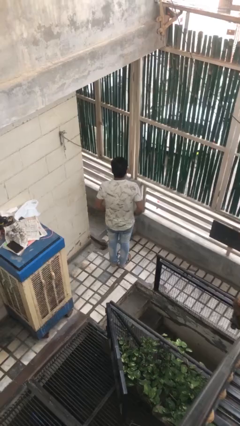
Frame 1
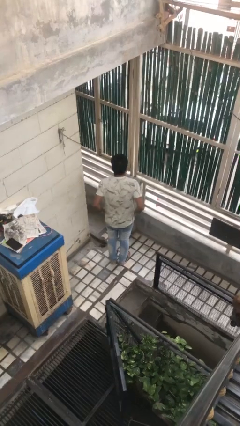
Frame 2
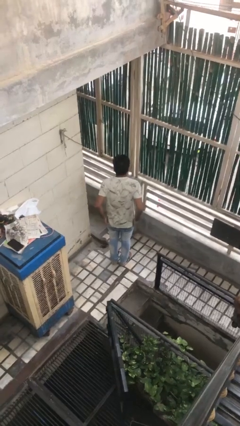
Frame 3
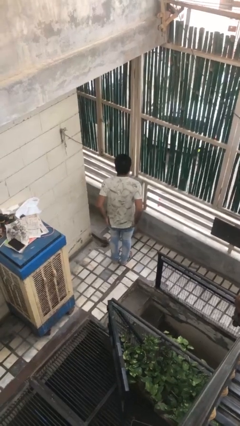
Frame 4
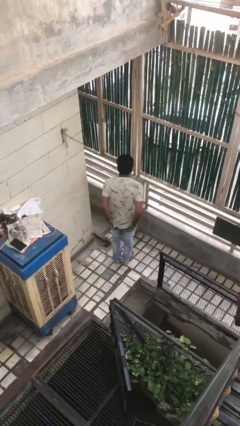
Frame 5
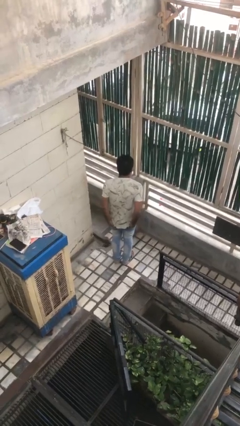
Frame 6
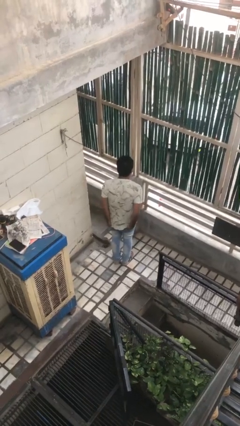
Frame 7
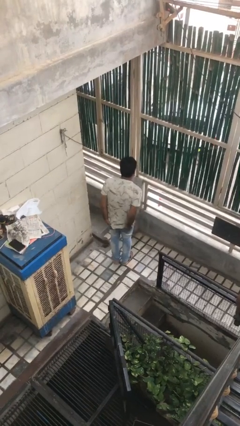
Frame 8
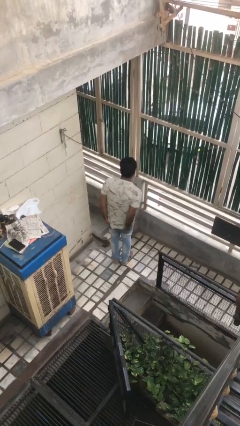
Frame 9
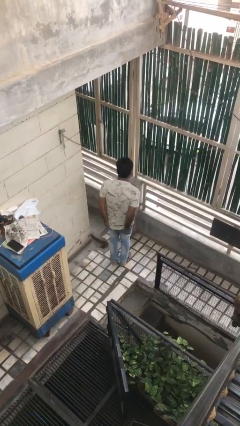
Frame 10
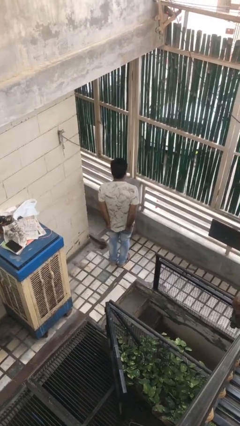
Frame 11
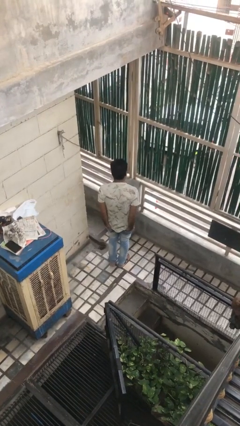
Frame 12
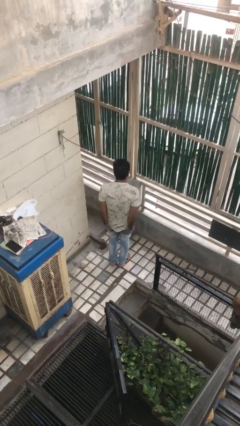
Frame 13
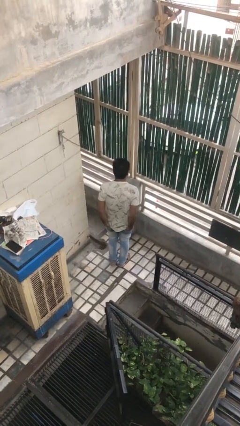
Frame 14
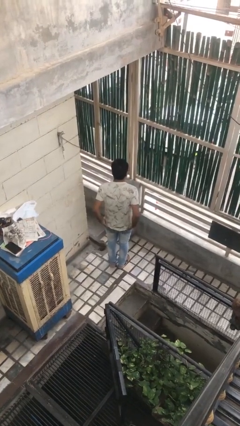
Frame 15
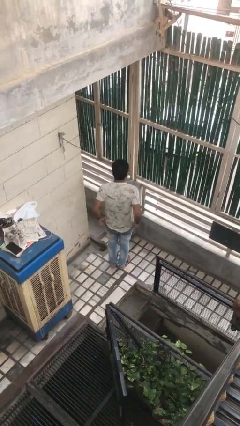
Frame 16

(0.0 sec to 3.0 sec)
person puts hands in back pockets

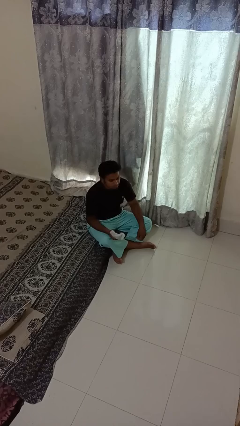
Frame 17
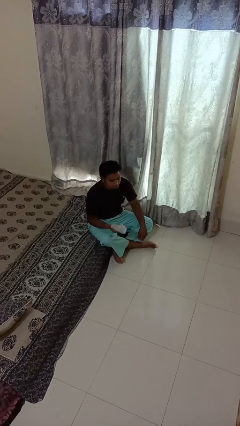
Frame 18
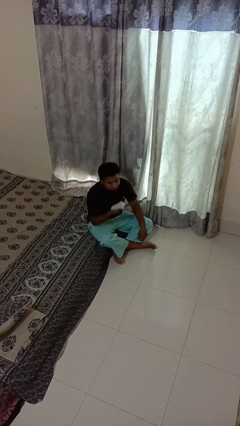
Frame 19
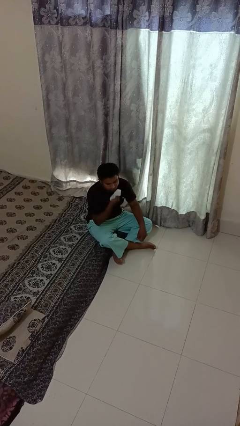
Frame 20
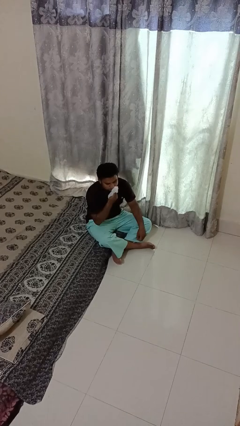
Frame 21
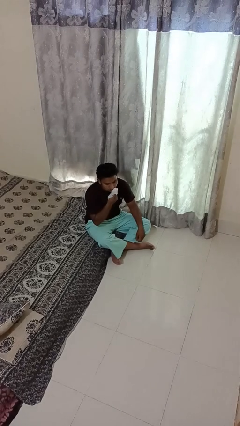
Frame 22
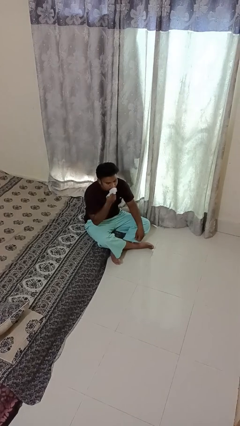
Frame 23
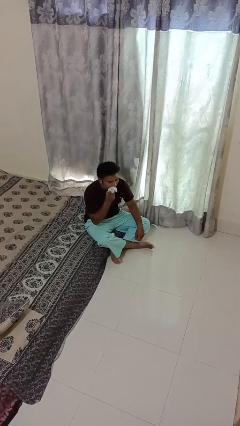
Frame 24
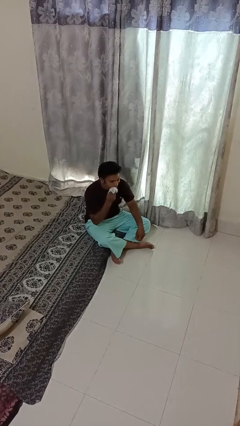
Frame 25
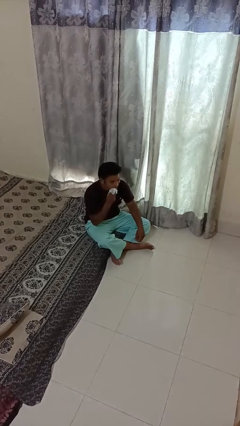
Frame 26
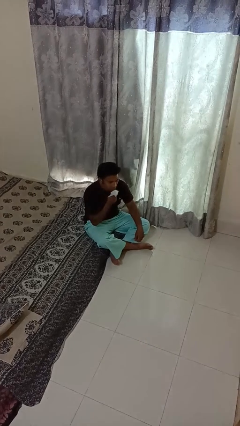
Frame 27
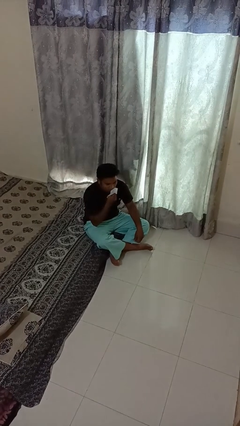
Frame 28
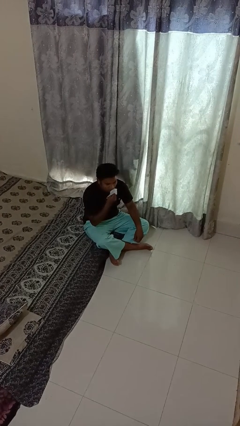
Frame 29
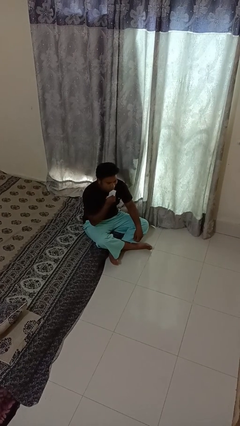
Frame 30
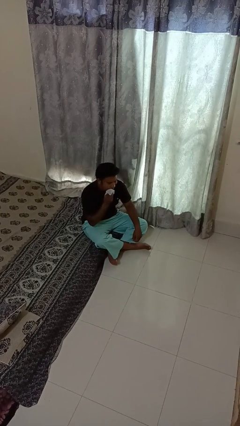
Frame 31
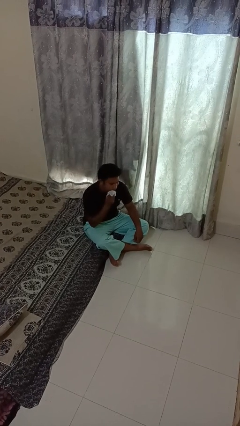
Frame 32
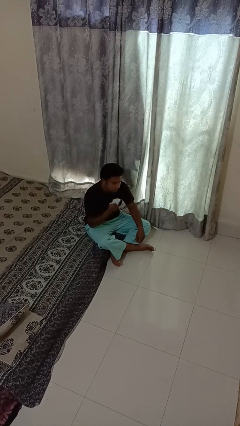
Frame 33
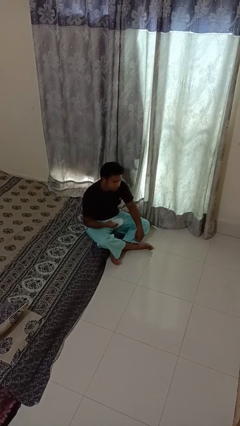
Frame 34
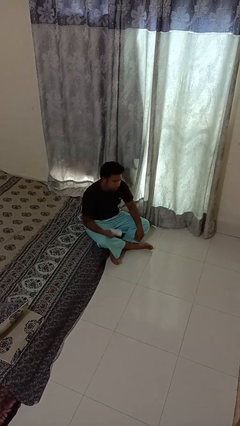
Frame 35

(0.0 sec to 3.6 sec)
person wipes mouth with napkin

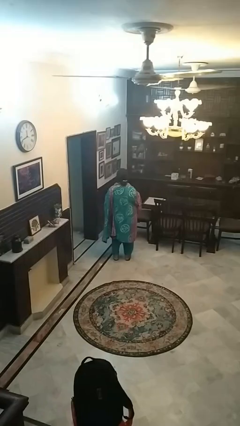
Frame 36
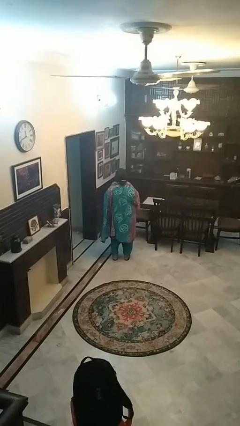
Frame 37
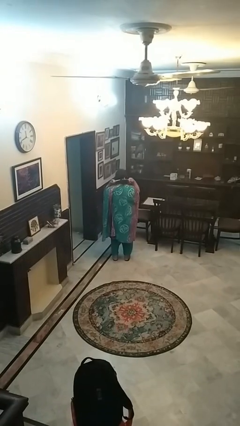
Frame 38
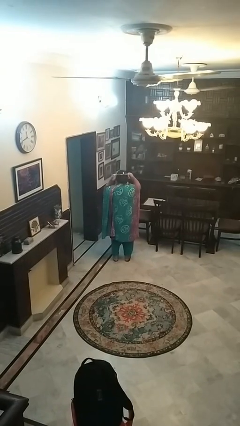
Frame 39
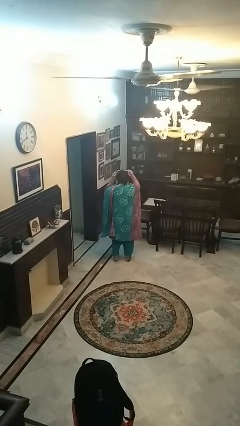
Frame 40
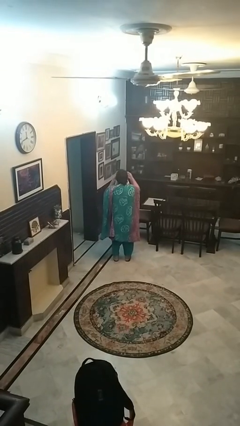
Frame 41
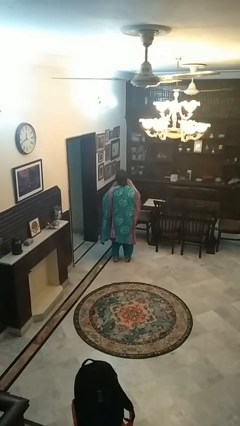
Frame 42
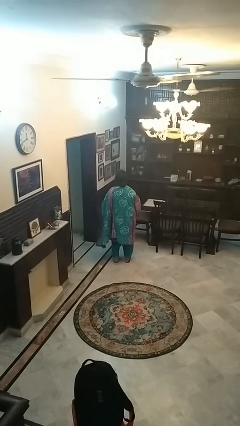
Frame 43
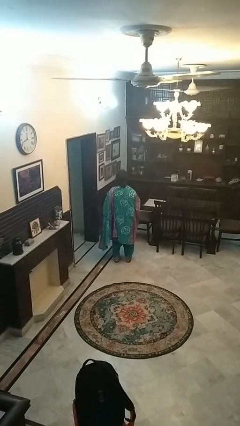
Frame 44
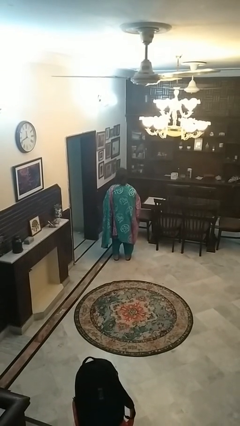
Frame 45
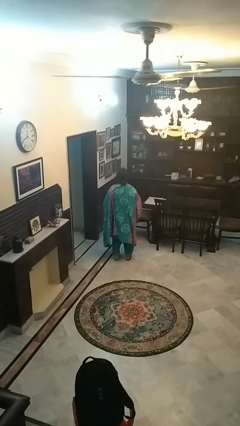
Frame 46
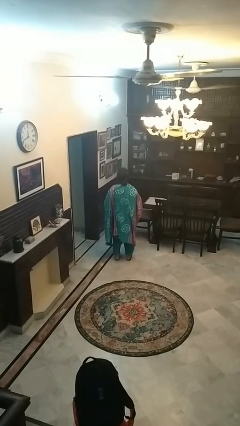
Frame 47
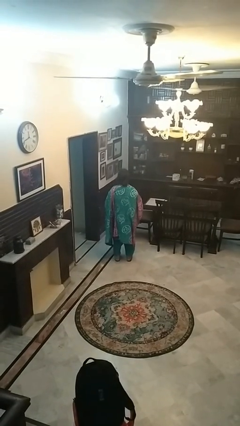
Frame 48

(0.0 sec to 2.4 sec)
person takes off apron

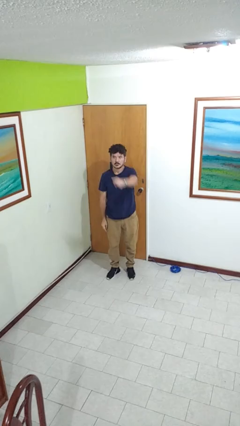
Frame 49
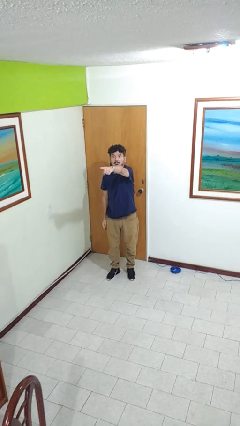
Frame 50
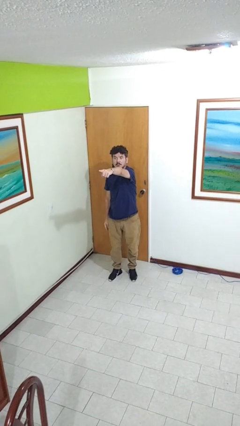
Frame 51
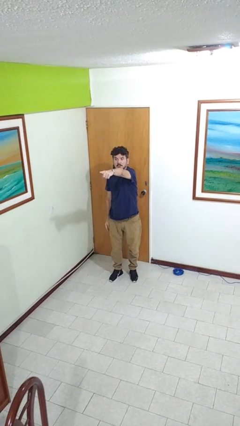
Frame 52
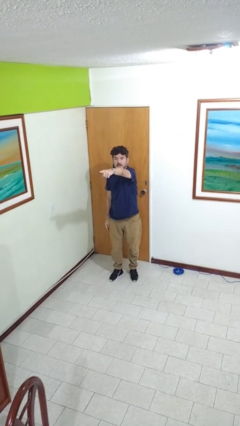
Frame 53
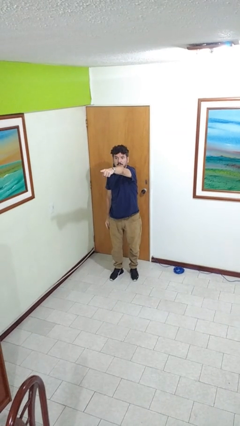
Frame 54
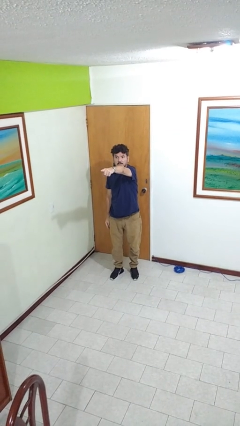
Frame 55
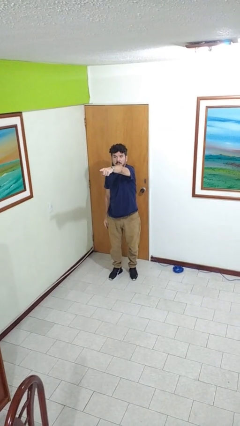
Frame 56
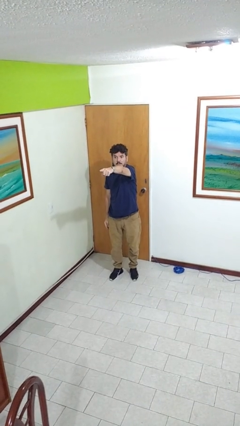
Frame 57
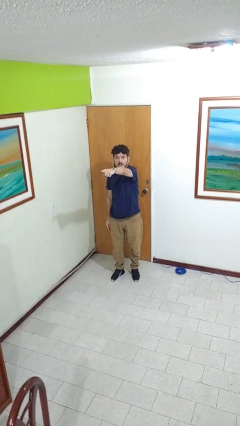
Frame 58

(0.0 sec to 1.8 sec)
person points at person

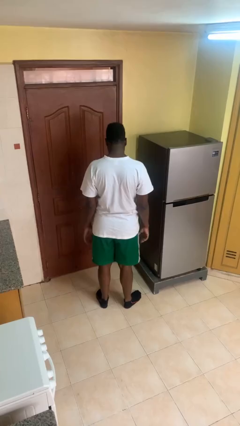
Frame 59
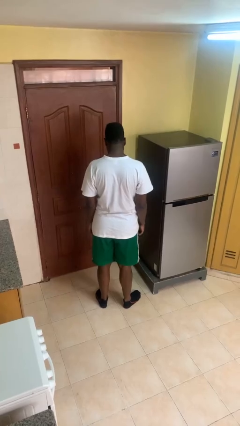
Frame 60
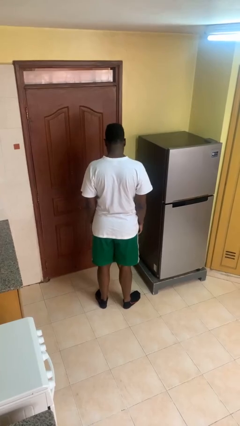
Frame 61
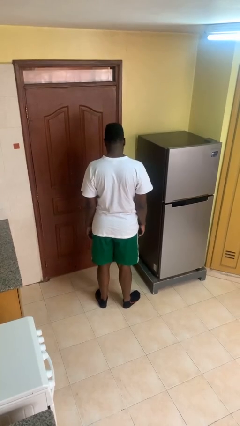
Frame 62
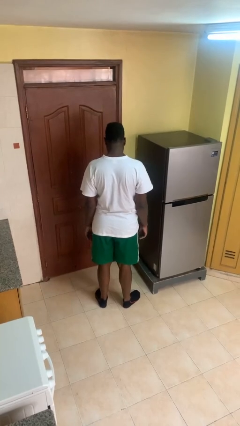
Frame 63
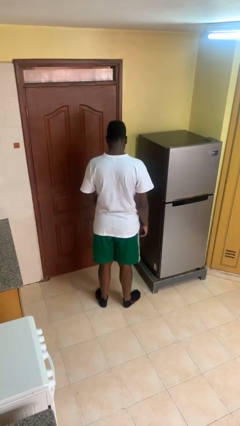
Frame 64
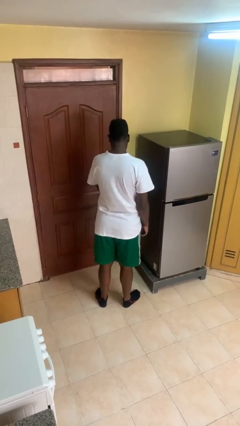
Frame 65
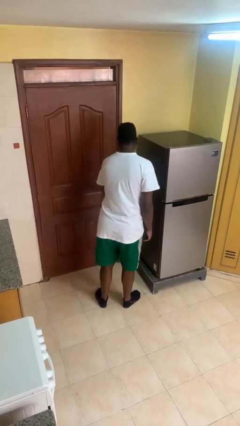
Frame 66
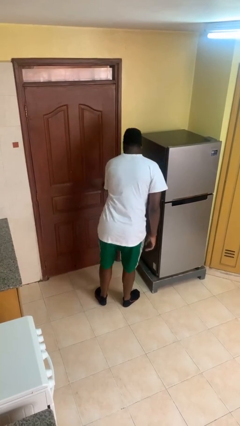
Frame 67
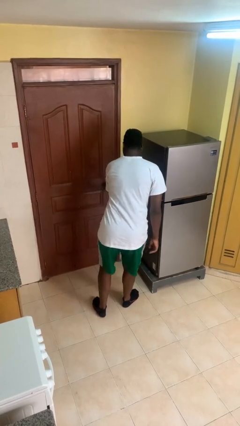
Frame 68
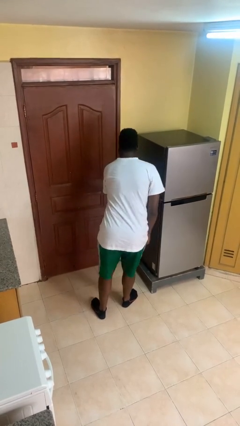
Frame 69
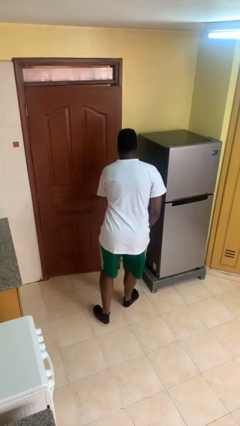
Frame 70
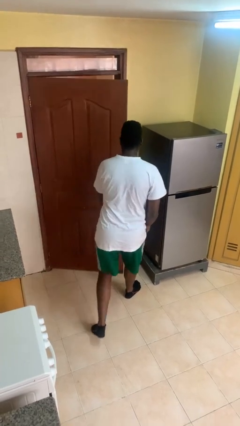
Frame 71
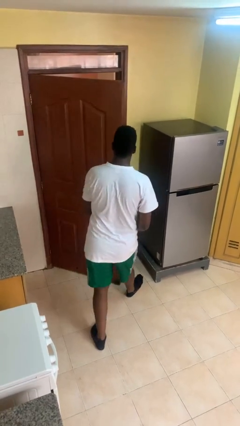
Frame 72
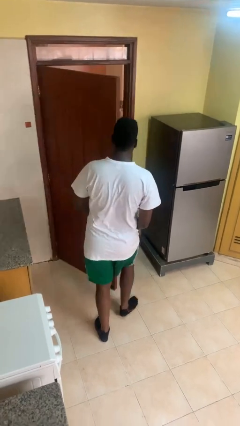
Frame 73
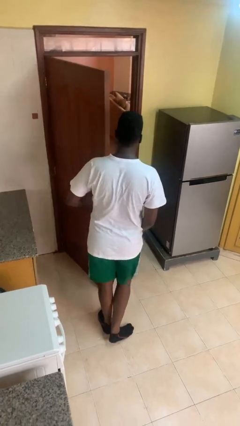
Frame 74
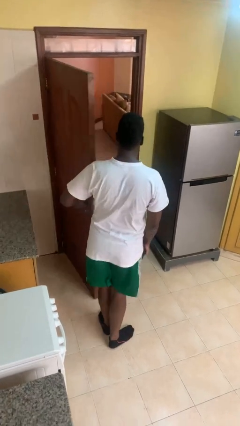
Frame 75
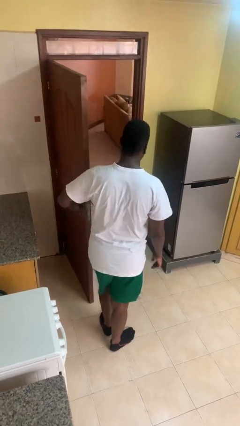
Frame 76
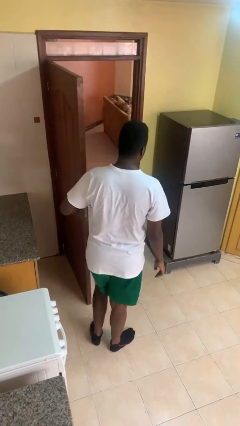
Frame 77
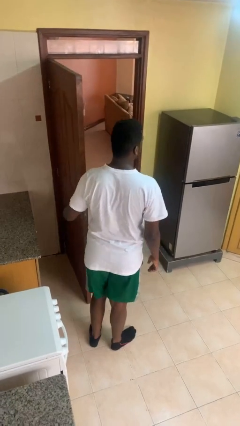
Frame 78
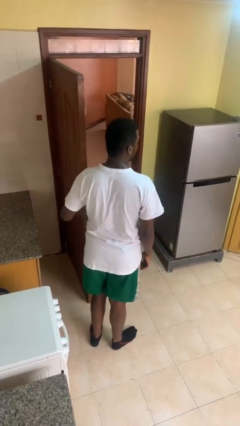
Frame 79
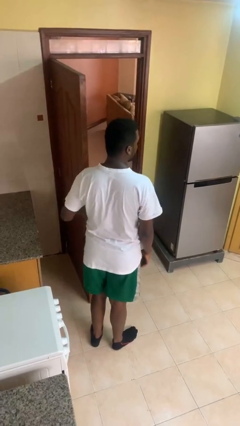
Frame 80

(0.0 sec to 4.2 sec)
person opens facility door

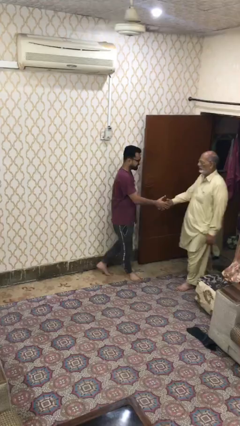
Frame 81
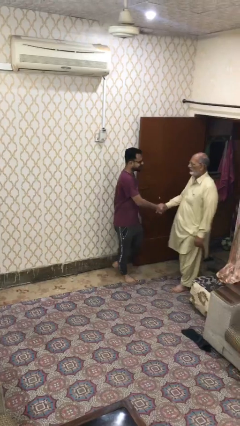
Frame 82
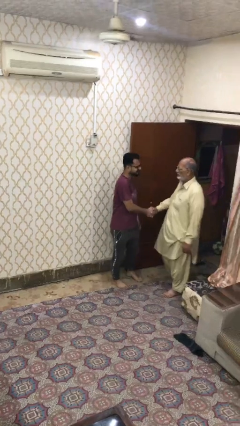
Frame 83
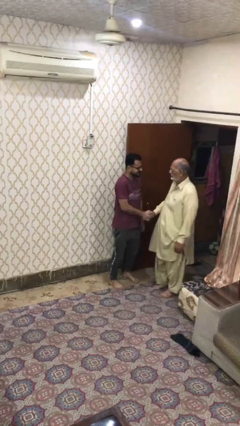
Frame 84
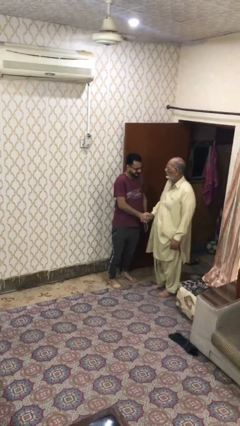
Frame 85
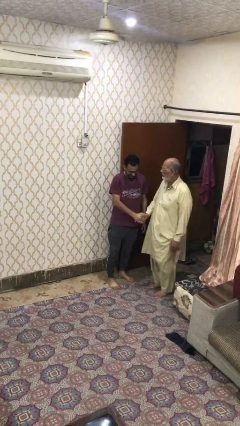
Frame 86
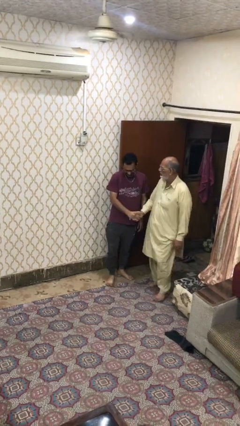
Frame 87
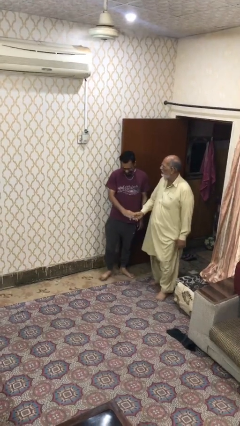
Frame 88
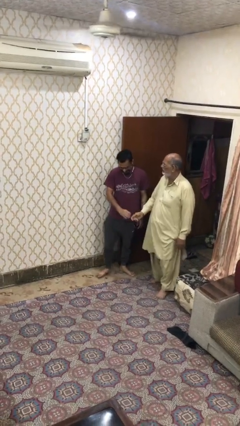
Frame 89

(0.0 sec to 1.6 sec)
person shakes hand

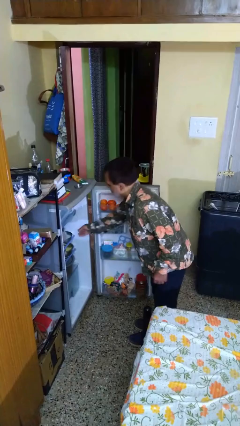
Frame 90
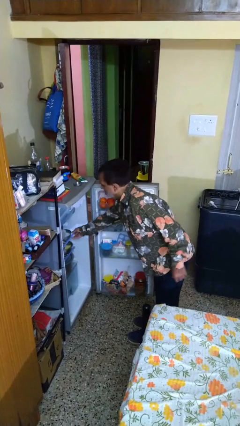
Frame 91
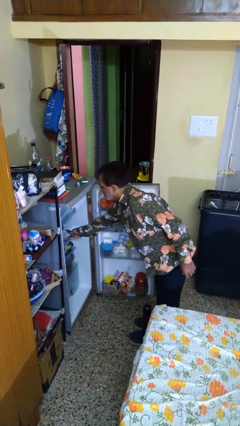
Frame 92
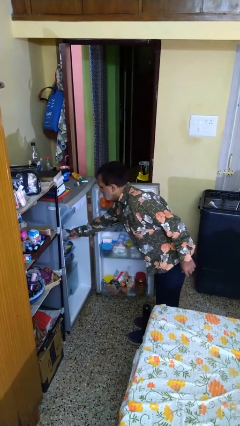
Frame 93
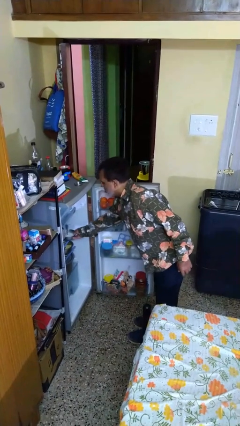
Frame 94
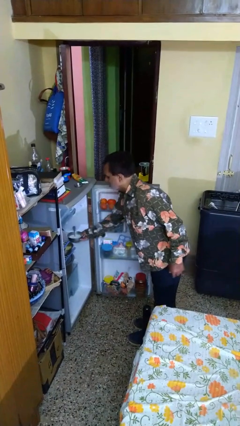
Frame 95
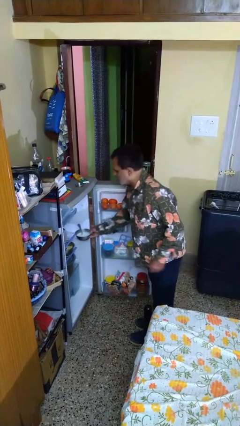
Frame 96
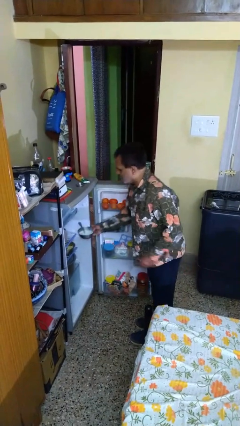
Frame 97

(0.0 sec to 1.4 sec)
person takes object from refrigerator
